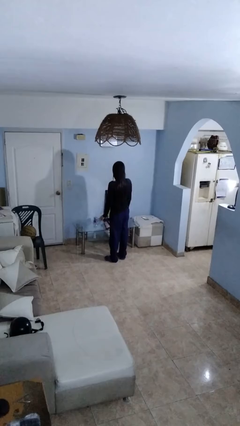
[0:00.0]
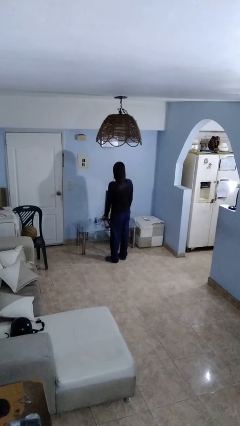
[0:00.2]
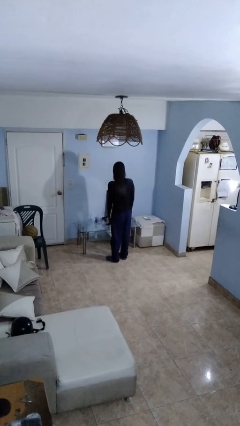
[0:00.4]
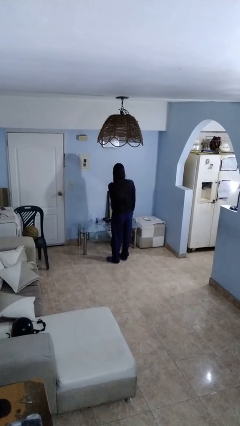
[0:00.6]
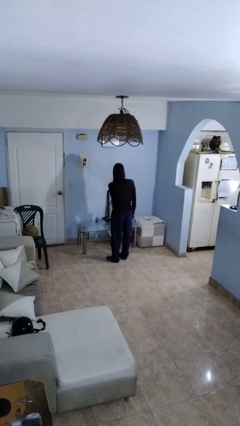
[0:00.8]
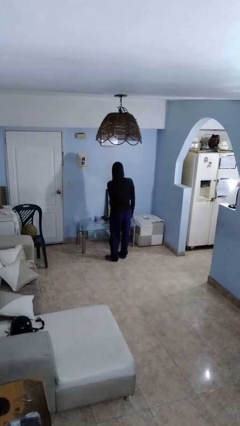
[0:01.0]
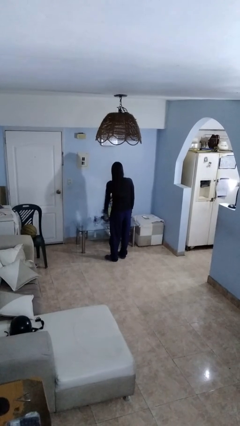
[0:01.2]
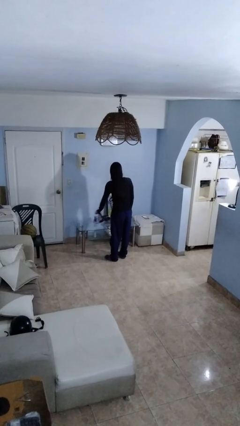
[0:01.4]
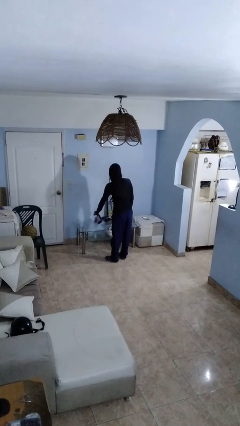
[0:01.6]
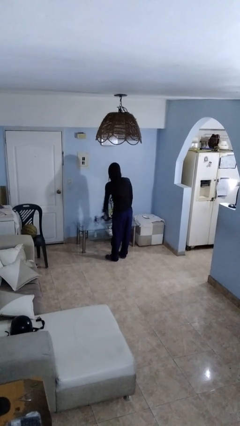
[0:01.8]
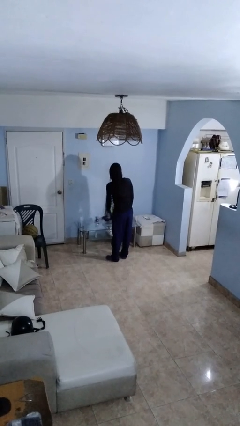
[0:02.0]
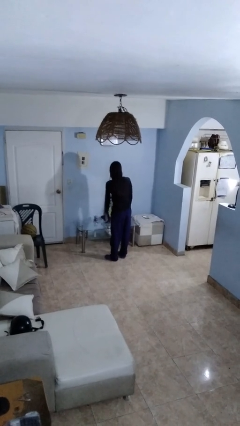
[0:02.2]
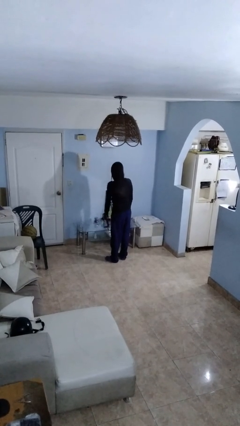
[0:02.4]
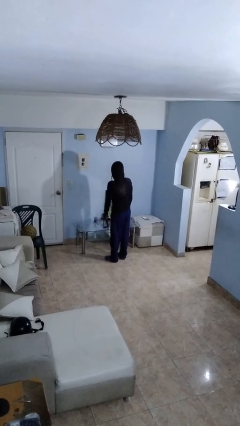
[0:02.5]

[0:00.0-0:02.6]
person sprays from bottle

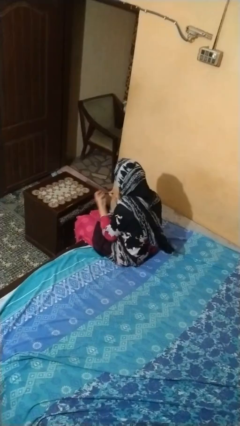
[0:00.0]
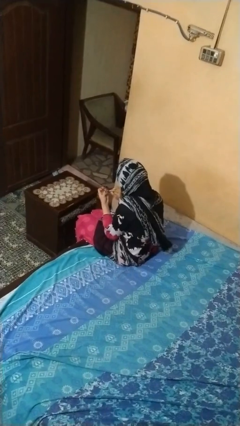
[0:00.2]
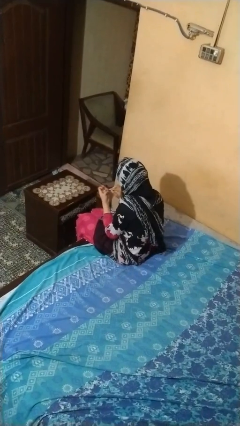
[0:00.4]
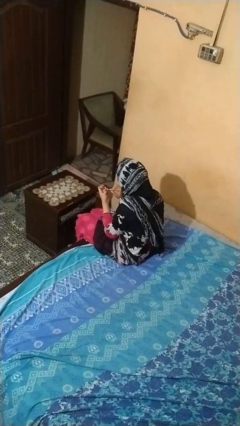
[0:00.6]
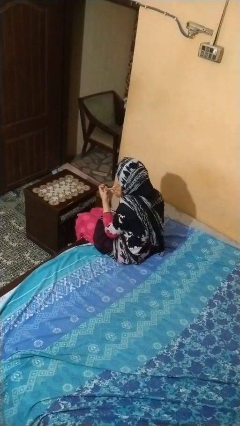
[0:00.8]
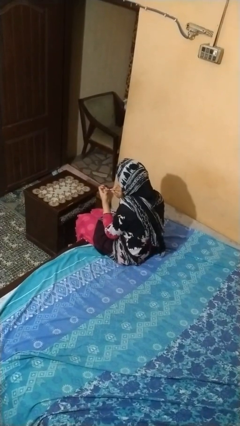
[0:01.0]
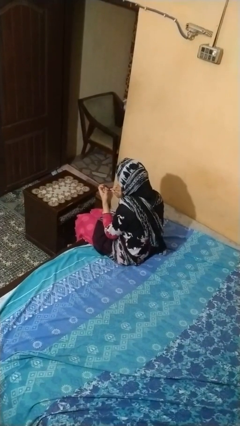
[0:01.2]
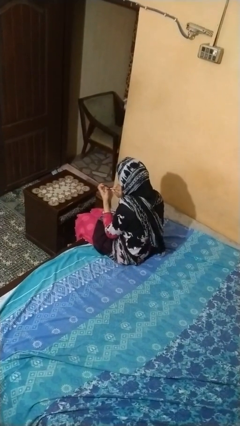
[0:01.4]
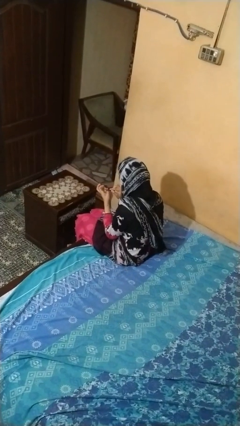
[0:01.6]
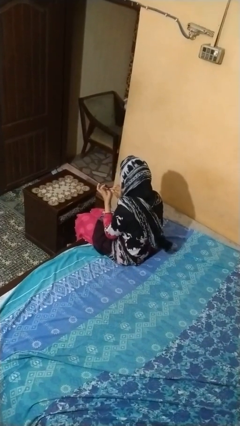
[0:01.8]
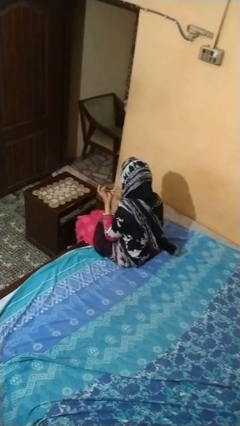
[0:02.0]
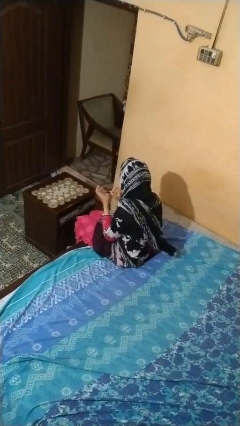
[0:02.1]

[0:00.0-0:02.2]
person files fingernails

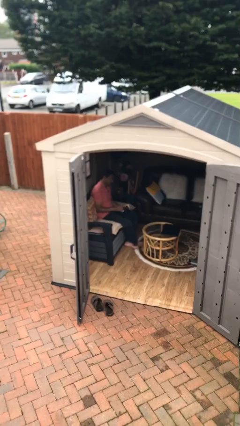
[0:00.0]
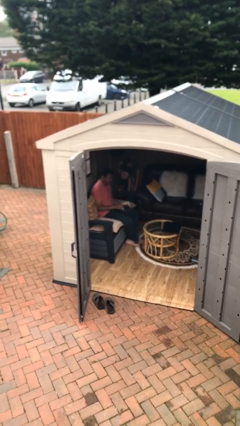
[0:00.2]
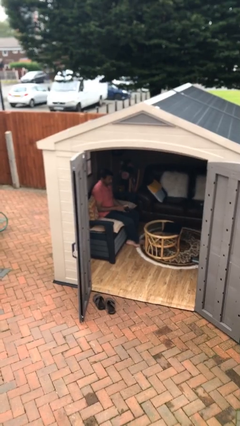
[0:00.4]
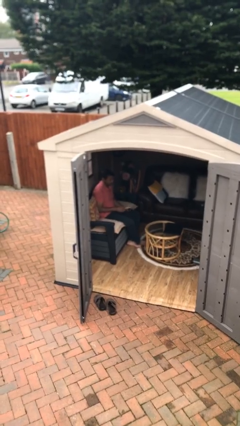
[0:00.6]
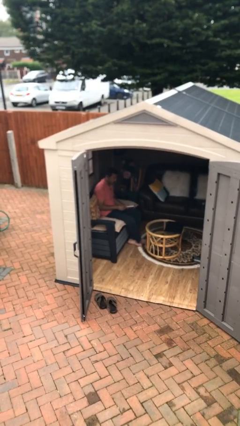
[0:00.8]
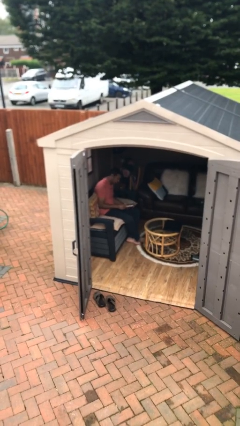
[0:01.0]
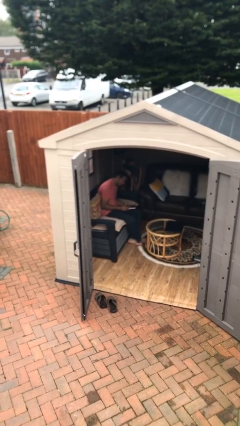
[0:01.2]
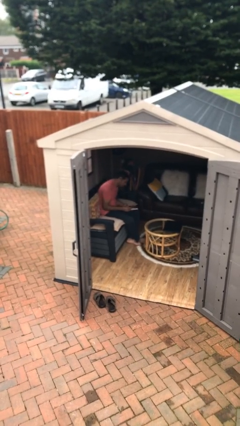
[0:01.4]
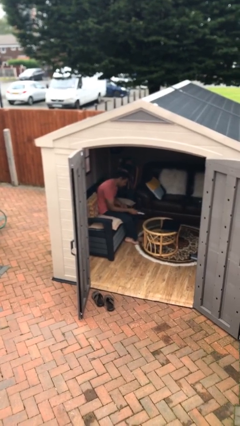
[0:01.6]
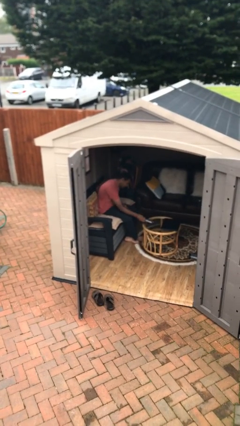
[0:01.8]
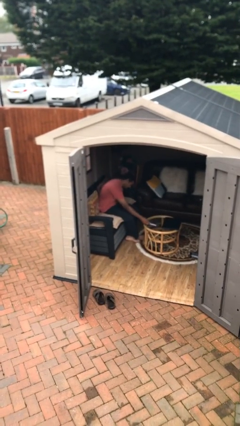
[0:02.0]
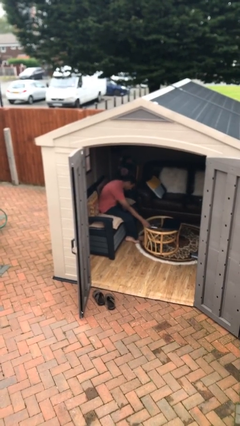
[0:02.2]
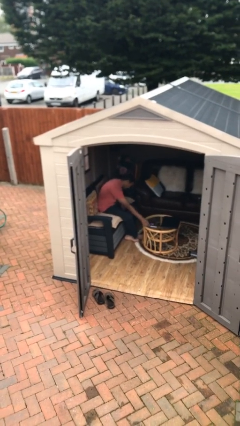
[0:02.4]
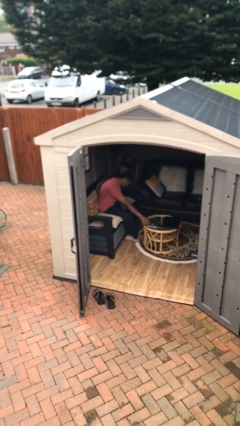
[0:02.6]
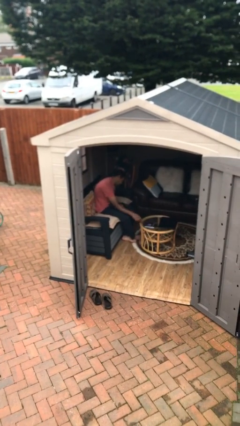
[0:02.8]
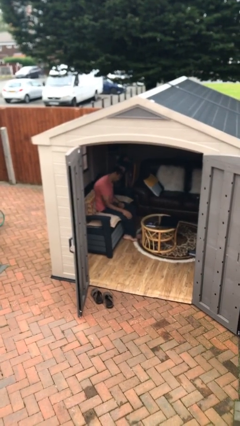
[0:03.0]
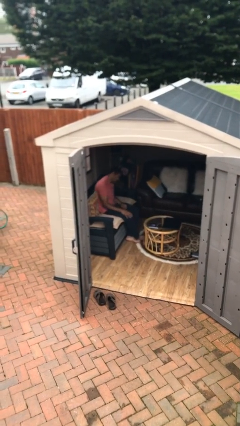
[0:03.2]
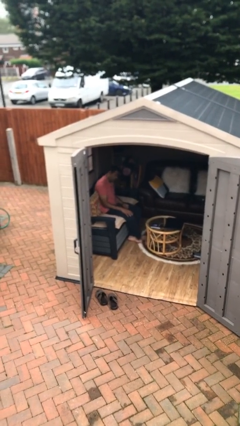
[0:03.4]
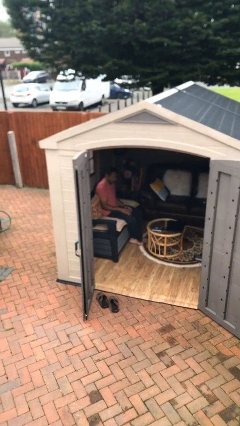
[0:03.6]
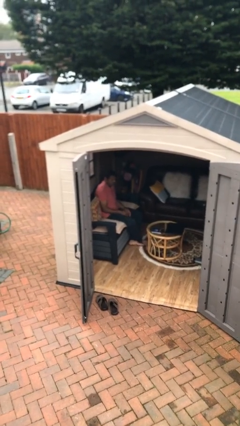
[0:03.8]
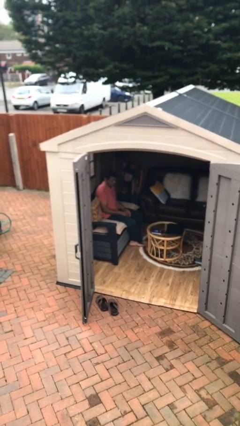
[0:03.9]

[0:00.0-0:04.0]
person puts down object on table

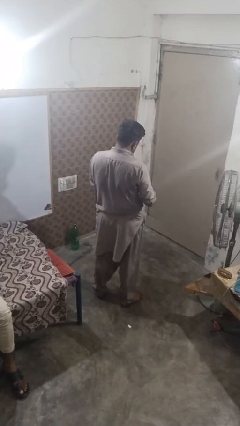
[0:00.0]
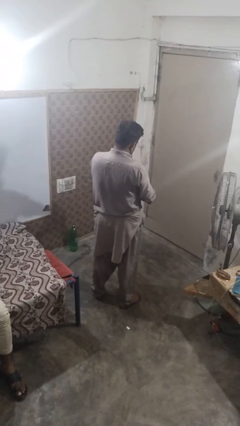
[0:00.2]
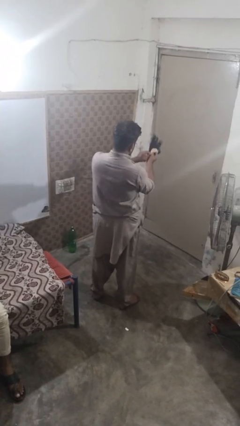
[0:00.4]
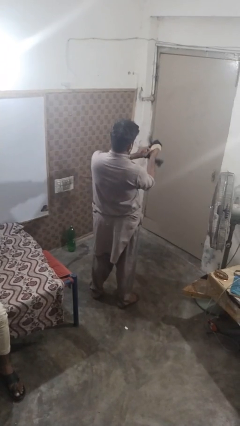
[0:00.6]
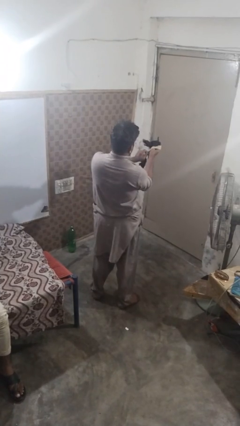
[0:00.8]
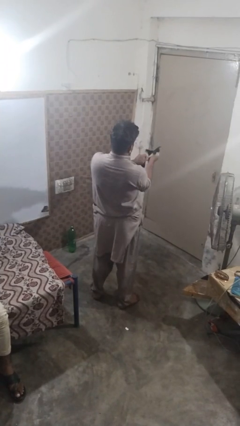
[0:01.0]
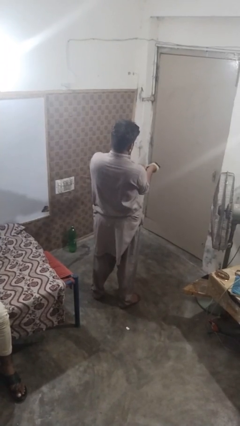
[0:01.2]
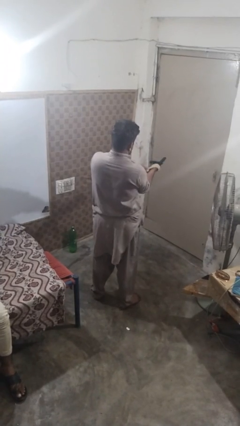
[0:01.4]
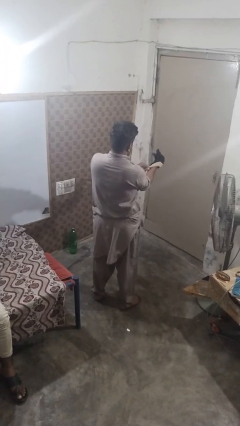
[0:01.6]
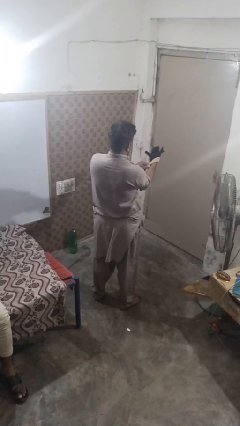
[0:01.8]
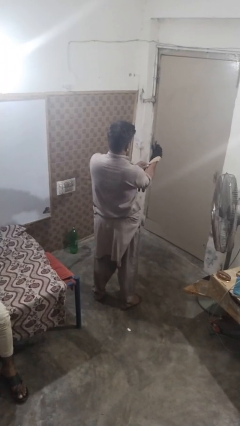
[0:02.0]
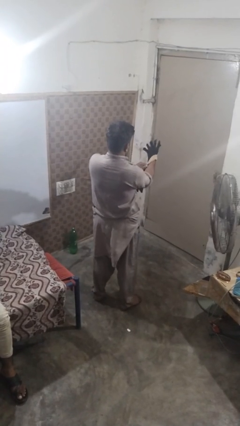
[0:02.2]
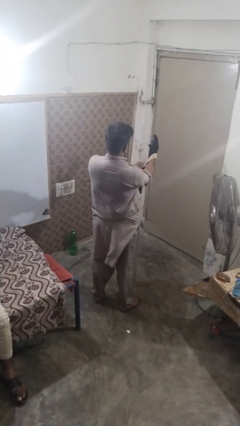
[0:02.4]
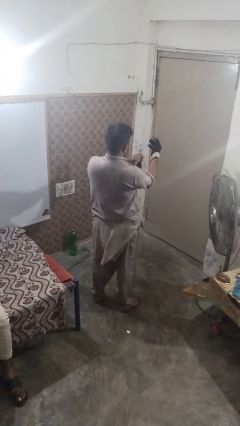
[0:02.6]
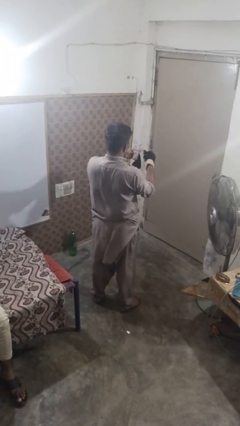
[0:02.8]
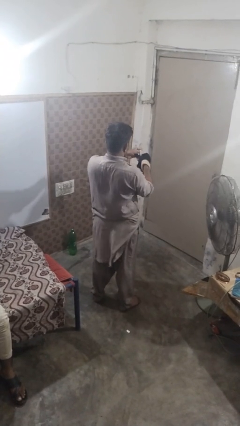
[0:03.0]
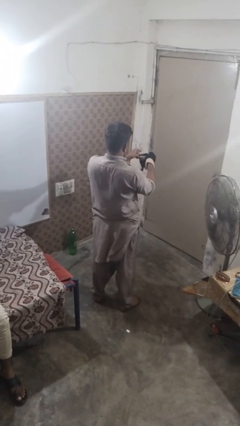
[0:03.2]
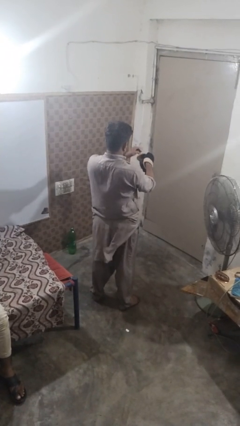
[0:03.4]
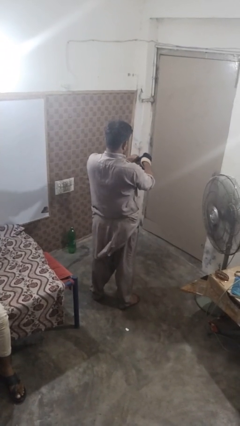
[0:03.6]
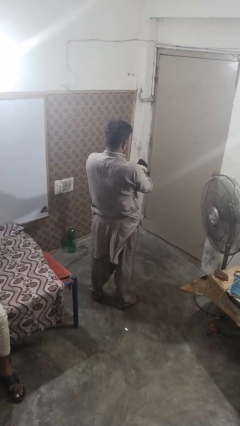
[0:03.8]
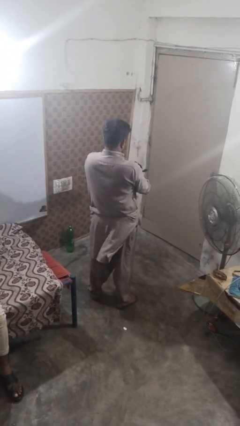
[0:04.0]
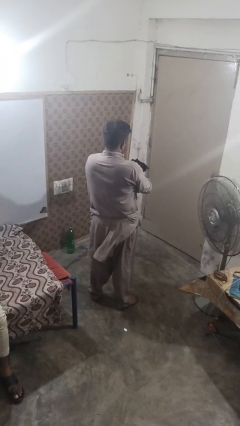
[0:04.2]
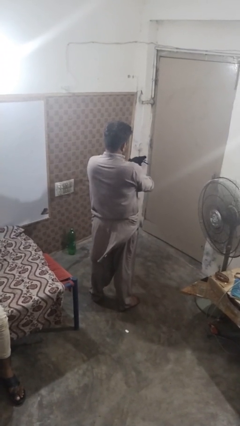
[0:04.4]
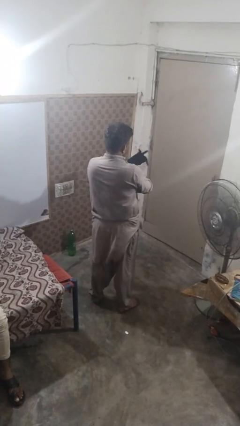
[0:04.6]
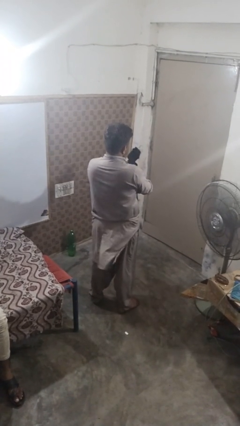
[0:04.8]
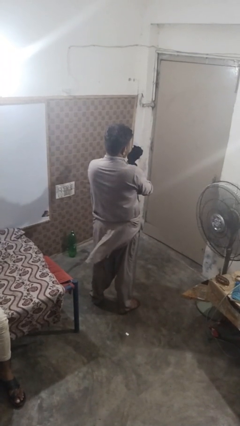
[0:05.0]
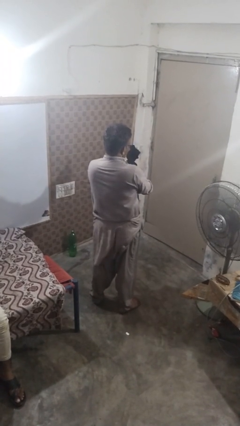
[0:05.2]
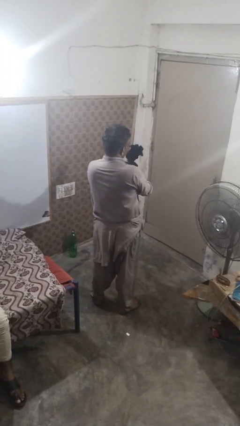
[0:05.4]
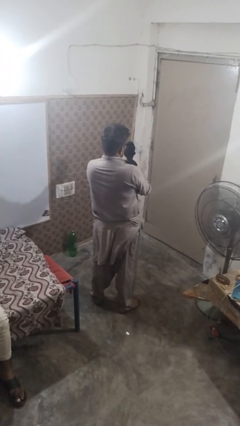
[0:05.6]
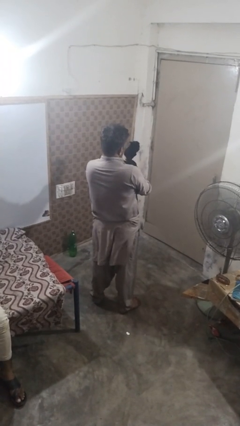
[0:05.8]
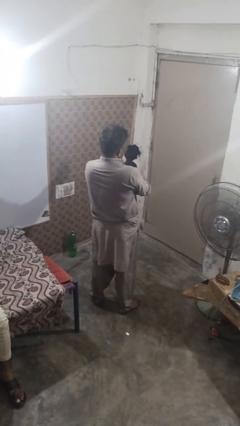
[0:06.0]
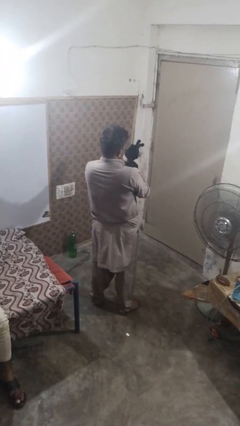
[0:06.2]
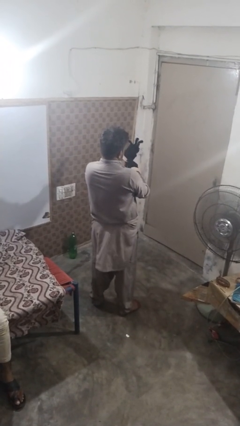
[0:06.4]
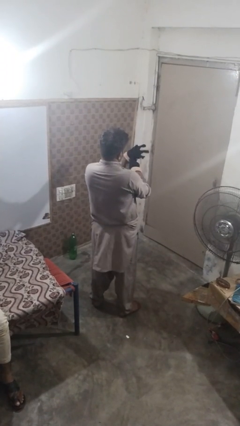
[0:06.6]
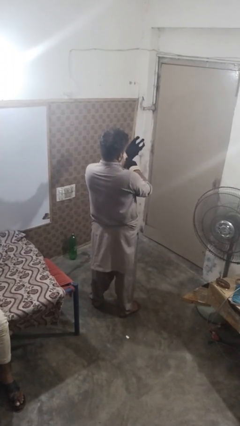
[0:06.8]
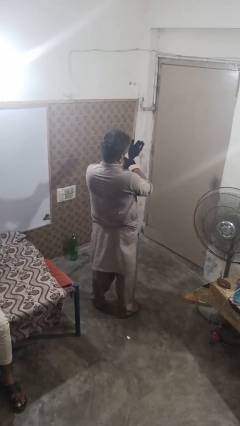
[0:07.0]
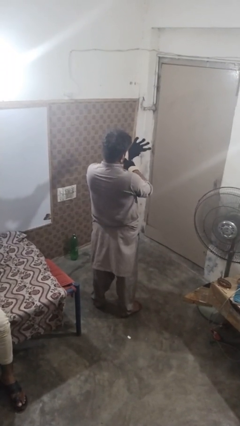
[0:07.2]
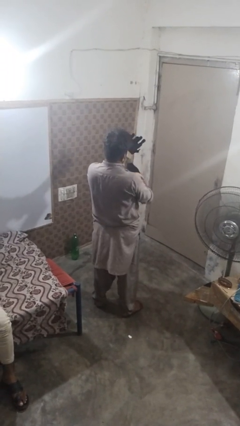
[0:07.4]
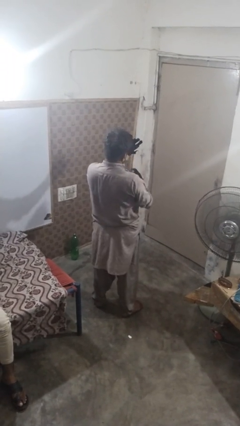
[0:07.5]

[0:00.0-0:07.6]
person puts on gloves

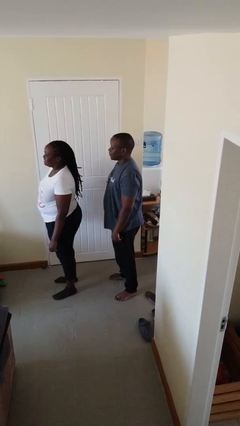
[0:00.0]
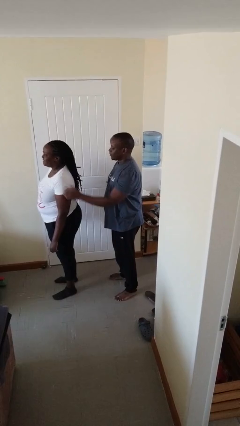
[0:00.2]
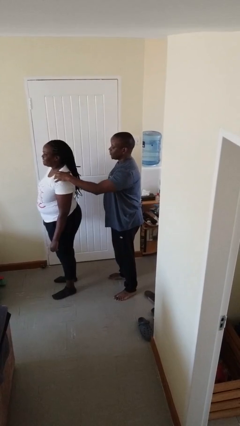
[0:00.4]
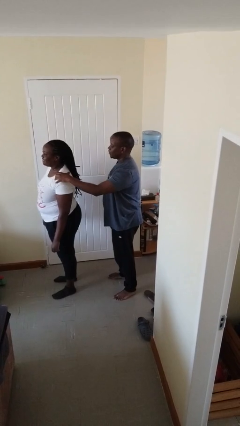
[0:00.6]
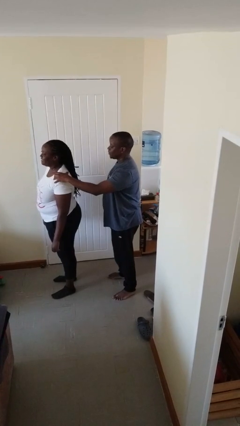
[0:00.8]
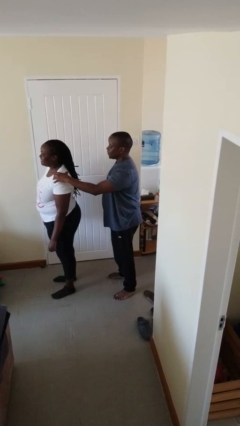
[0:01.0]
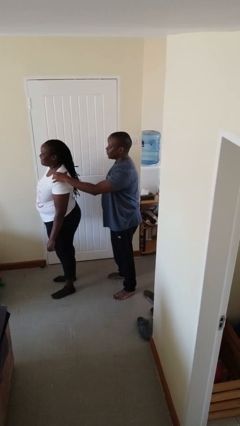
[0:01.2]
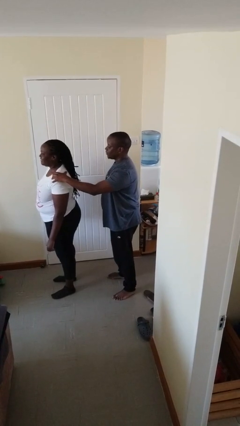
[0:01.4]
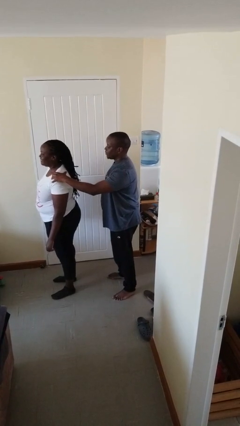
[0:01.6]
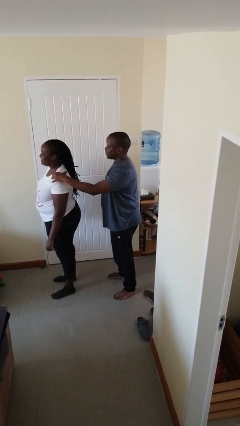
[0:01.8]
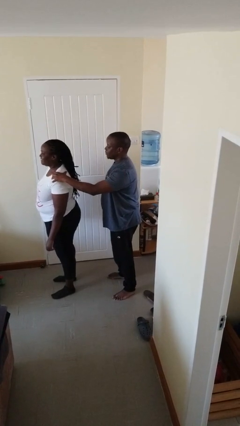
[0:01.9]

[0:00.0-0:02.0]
person grabs person by shoulder
